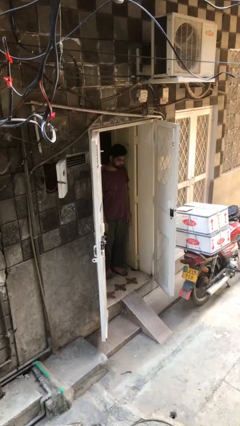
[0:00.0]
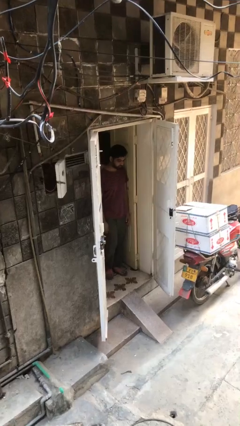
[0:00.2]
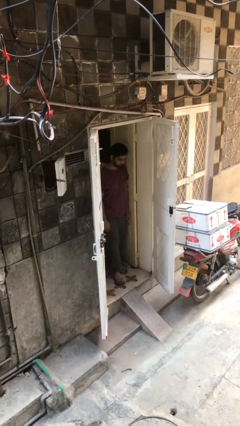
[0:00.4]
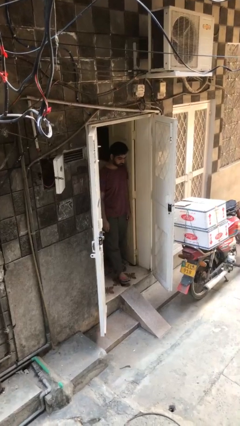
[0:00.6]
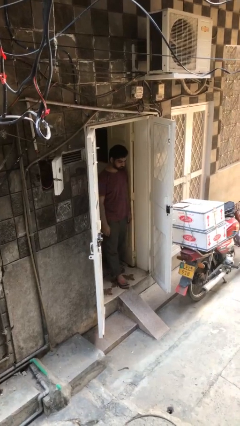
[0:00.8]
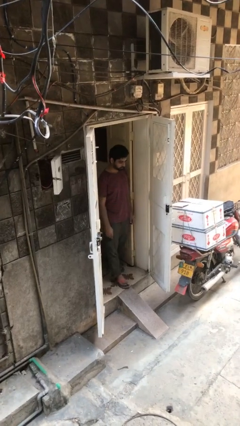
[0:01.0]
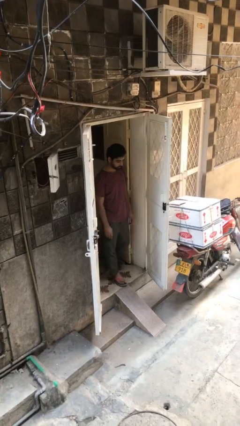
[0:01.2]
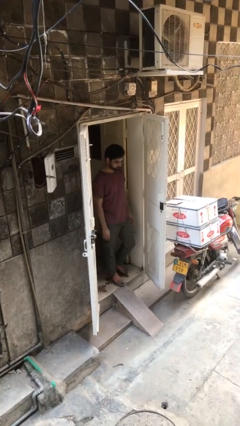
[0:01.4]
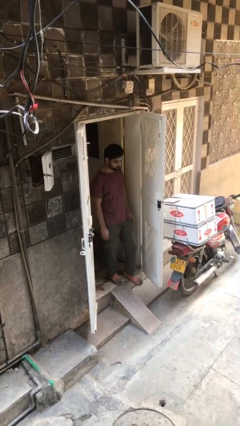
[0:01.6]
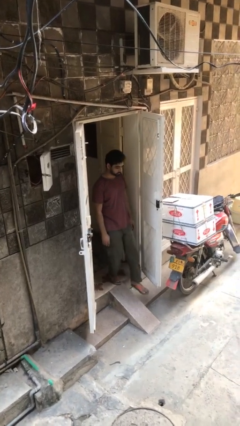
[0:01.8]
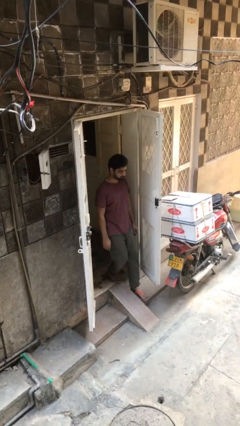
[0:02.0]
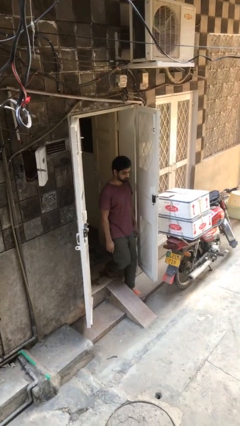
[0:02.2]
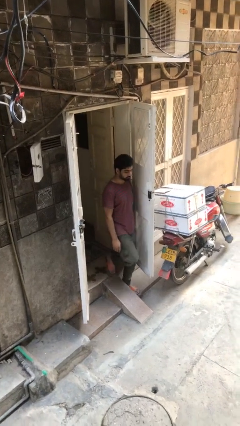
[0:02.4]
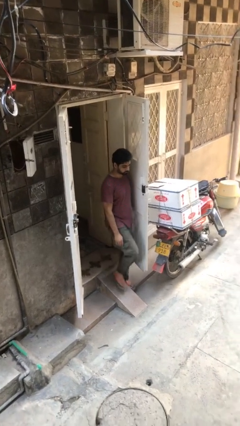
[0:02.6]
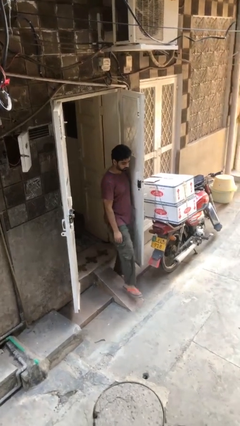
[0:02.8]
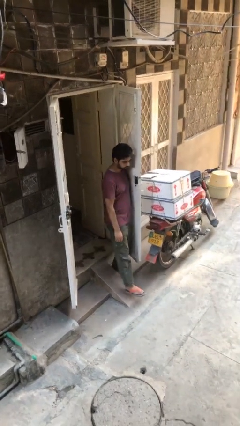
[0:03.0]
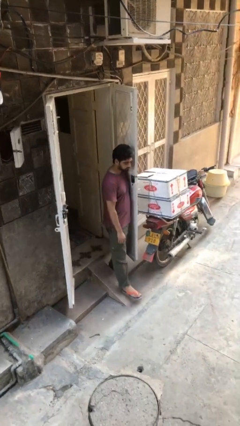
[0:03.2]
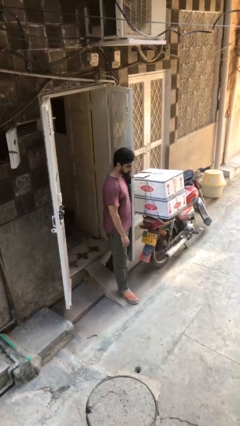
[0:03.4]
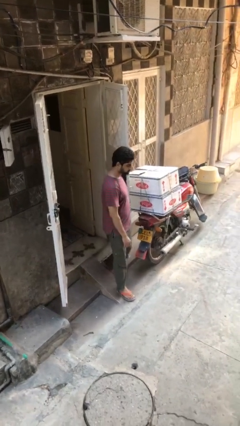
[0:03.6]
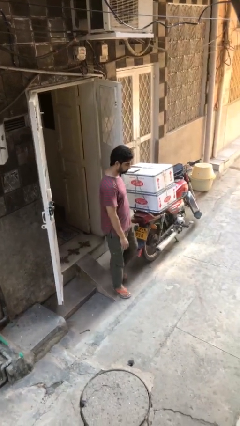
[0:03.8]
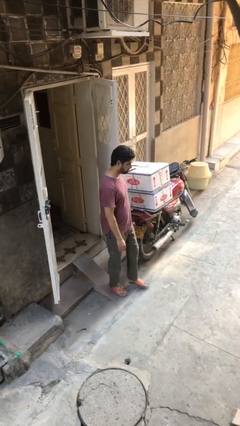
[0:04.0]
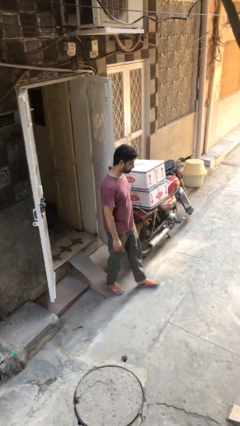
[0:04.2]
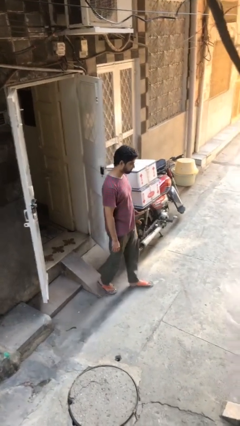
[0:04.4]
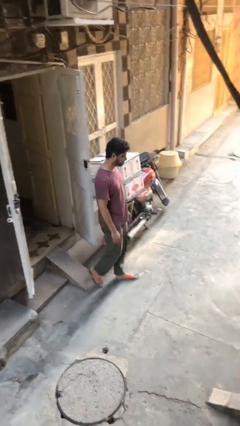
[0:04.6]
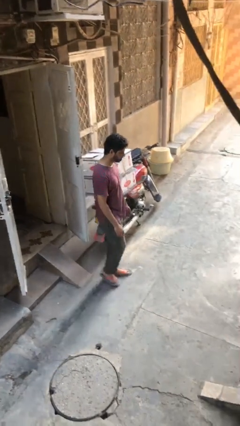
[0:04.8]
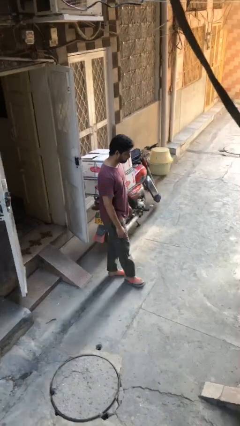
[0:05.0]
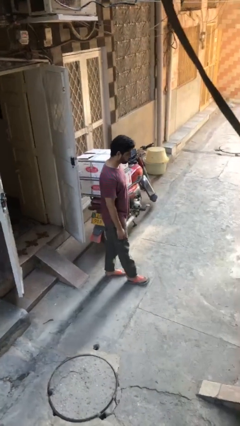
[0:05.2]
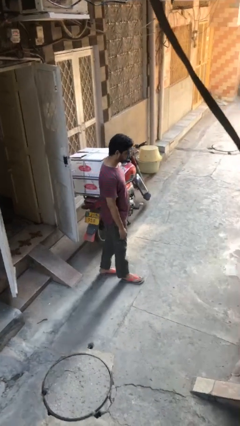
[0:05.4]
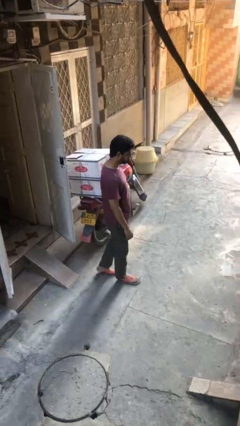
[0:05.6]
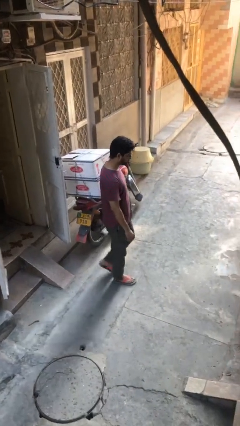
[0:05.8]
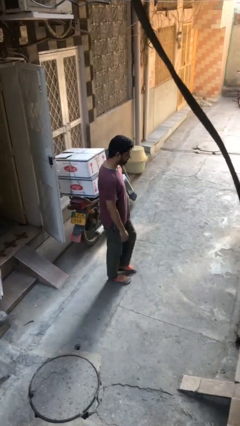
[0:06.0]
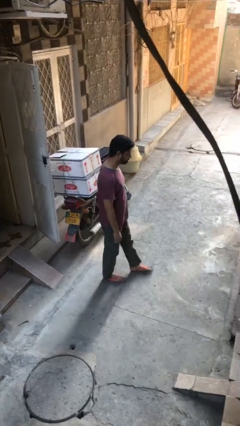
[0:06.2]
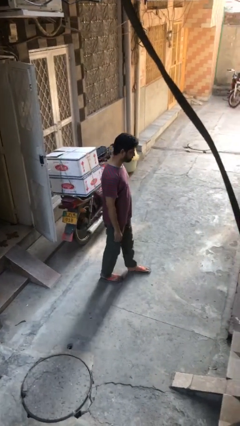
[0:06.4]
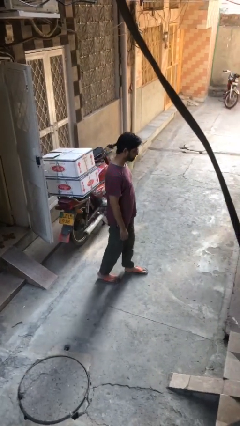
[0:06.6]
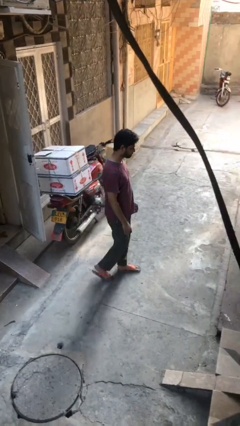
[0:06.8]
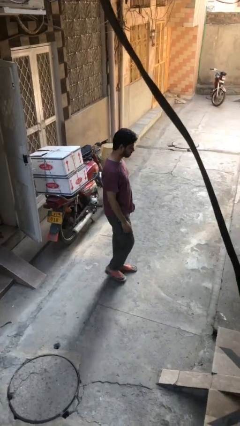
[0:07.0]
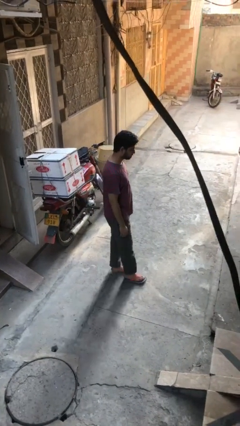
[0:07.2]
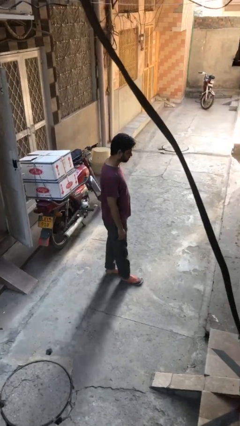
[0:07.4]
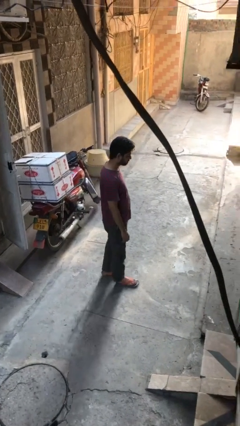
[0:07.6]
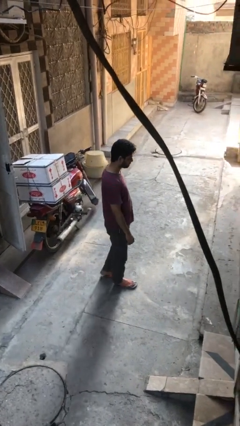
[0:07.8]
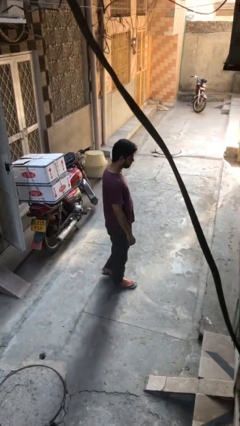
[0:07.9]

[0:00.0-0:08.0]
person enters scene through structure

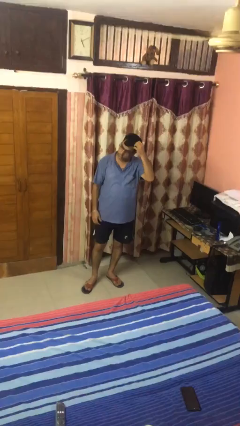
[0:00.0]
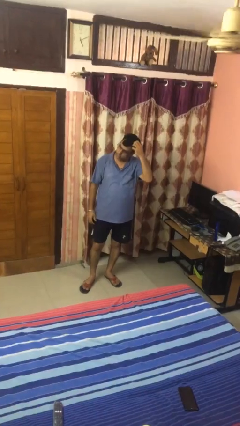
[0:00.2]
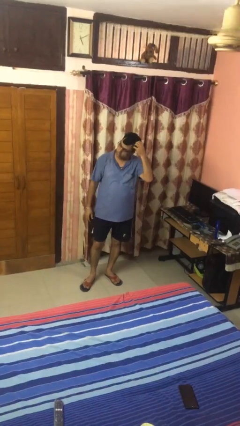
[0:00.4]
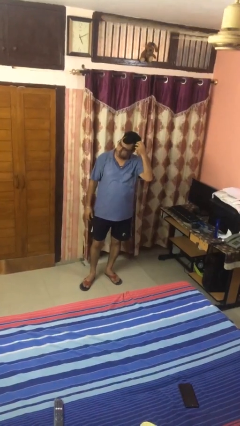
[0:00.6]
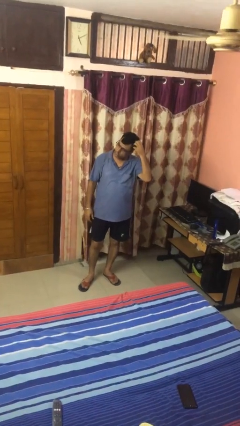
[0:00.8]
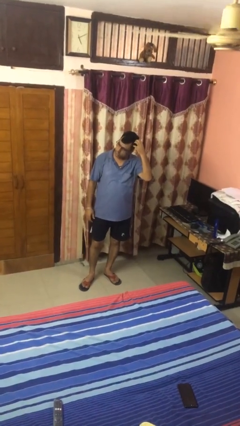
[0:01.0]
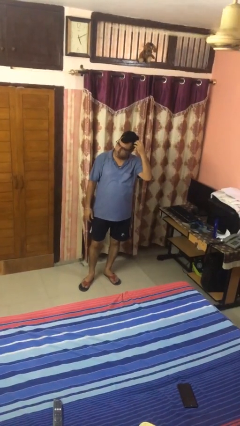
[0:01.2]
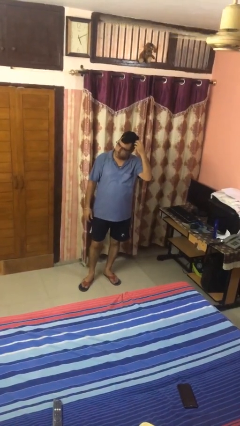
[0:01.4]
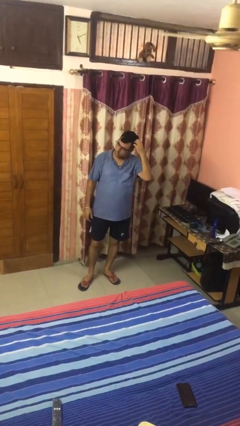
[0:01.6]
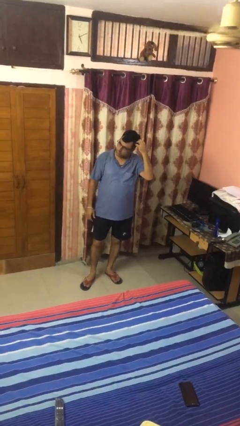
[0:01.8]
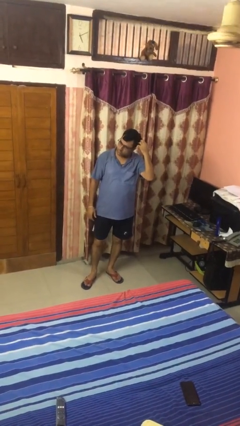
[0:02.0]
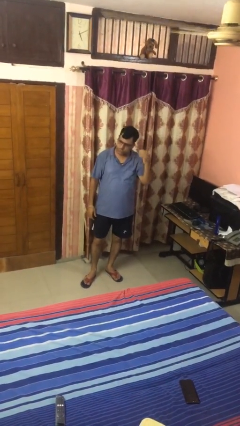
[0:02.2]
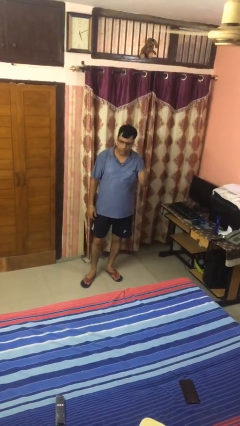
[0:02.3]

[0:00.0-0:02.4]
person scratches face

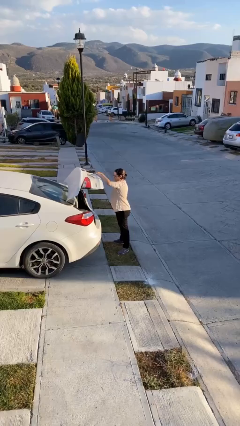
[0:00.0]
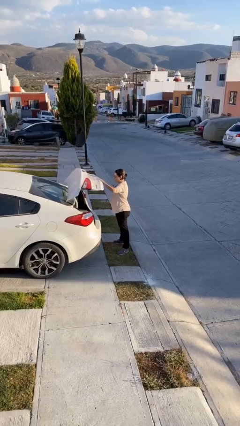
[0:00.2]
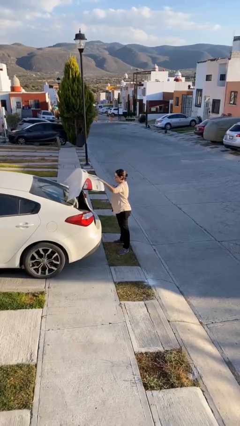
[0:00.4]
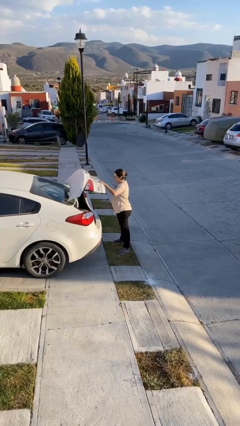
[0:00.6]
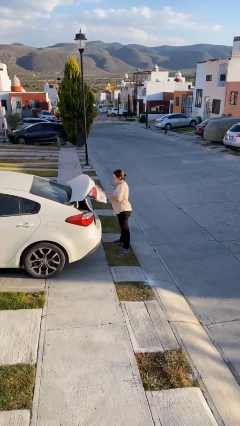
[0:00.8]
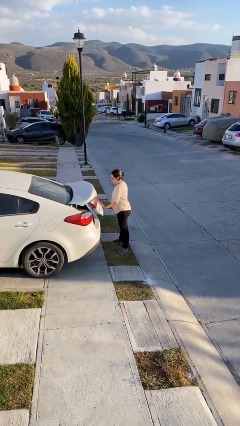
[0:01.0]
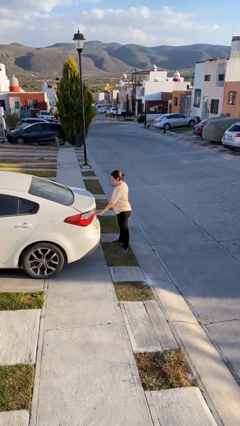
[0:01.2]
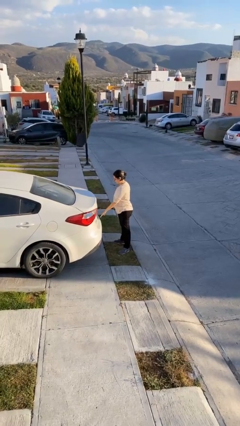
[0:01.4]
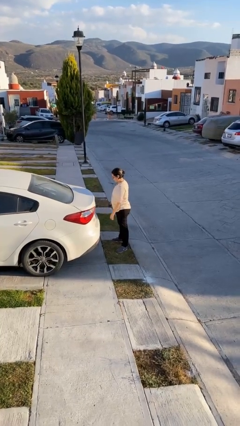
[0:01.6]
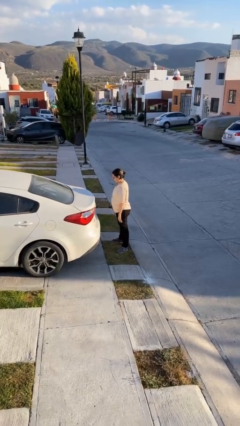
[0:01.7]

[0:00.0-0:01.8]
person closes car trunk

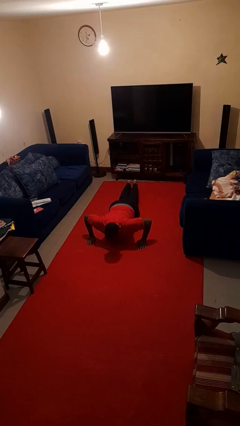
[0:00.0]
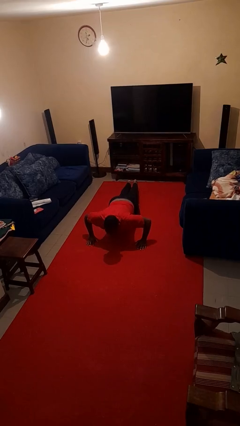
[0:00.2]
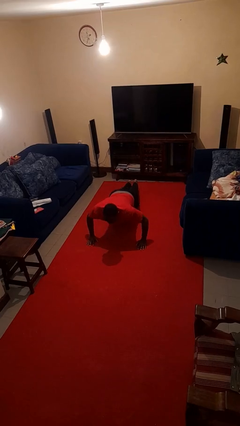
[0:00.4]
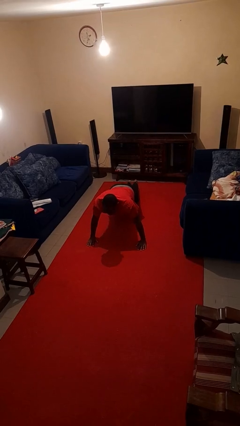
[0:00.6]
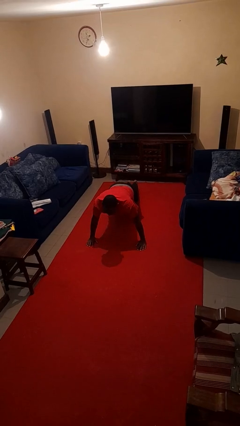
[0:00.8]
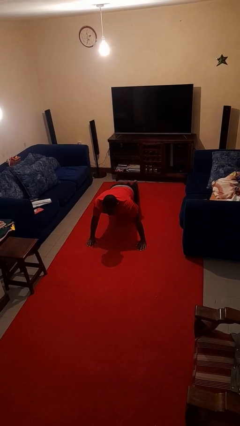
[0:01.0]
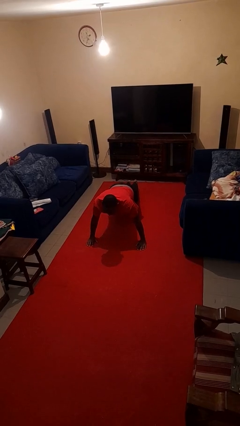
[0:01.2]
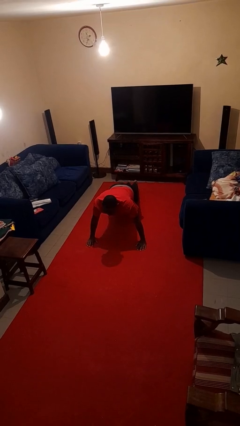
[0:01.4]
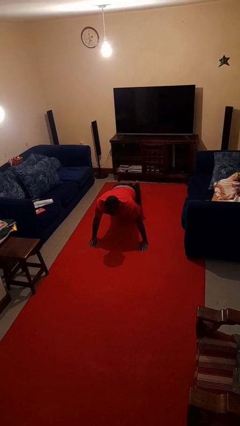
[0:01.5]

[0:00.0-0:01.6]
person exercises with pushup

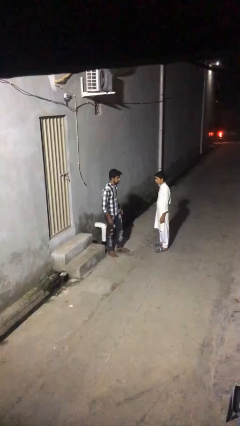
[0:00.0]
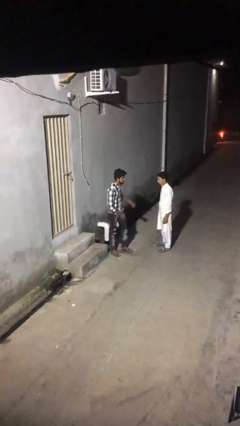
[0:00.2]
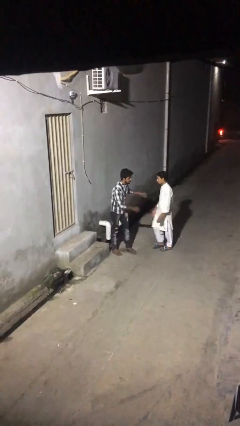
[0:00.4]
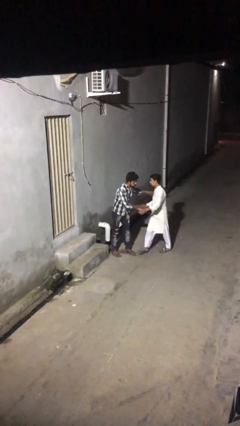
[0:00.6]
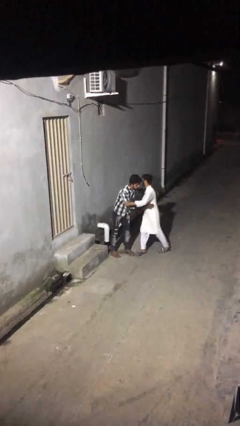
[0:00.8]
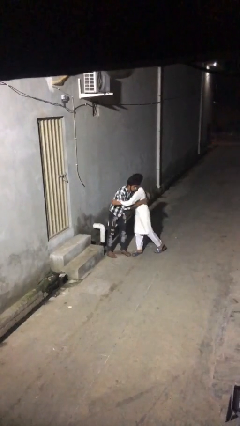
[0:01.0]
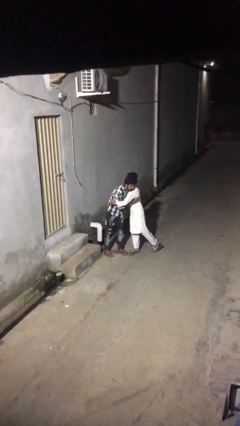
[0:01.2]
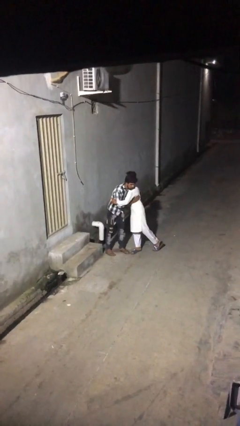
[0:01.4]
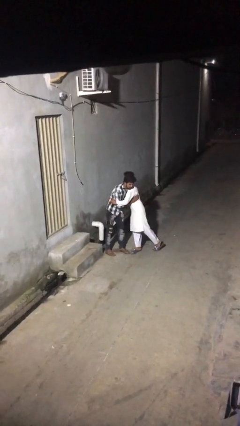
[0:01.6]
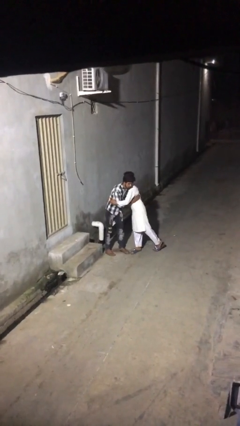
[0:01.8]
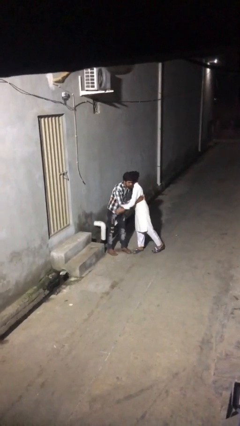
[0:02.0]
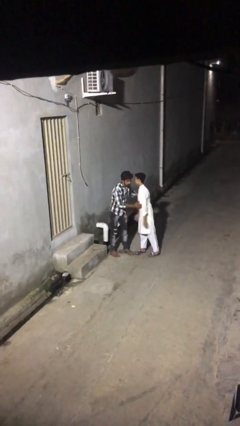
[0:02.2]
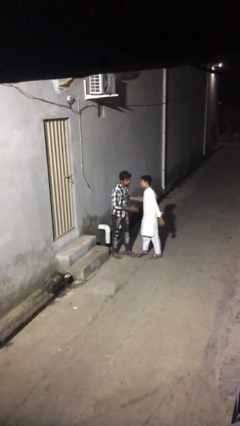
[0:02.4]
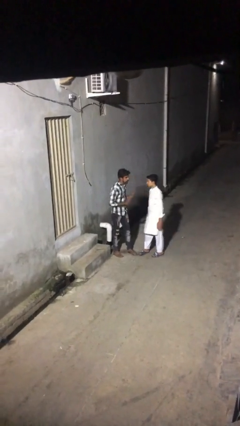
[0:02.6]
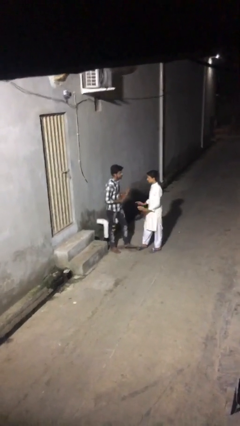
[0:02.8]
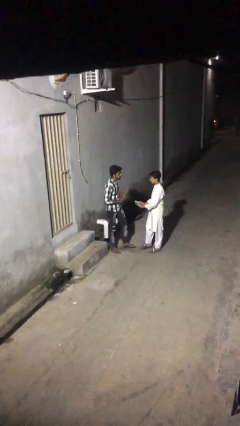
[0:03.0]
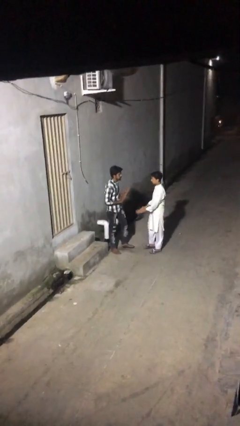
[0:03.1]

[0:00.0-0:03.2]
person embraces person

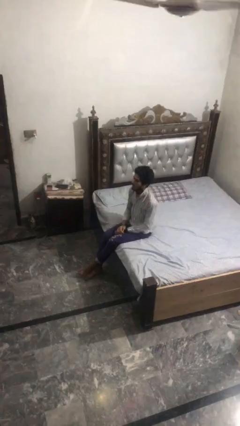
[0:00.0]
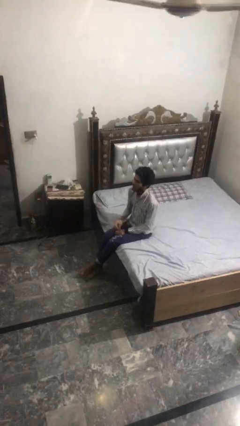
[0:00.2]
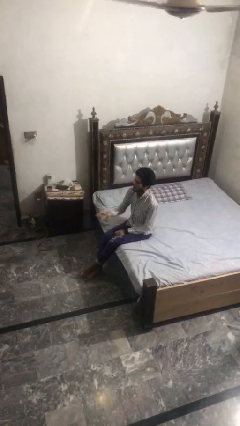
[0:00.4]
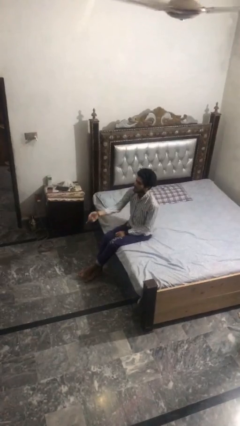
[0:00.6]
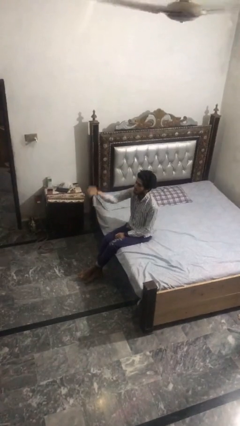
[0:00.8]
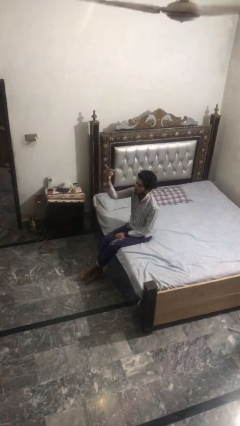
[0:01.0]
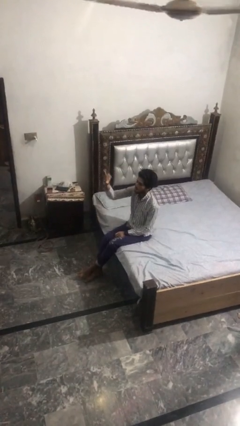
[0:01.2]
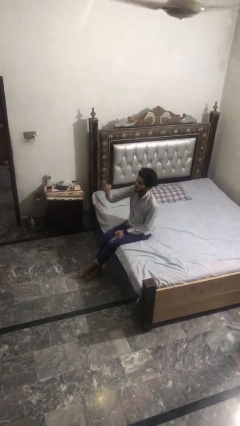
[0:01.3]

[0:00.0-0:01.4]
person gestures swipe up
